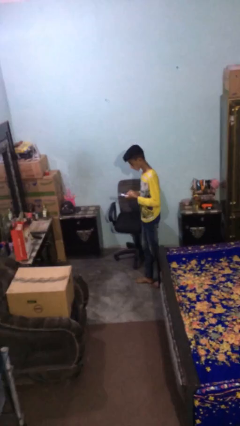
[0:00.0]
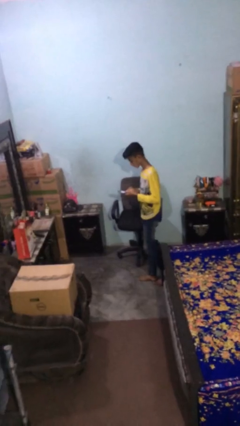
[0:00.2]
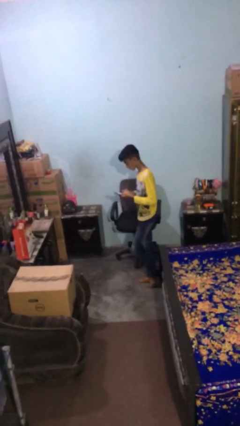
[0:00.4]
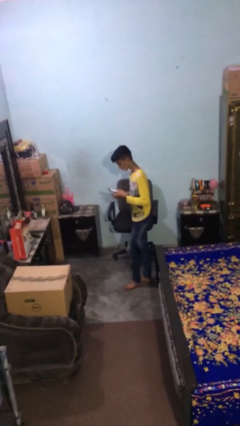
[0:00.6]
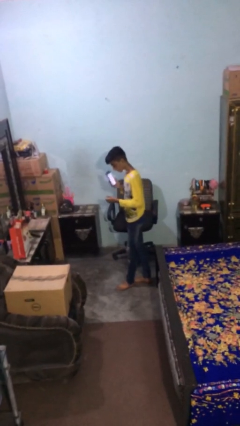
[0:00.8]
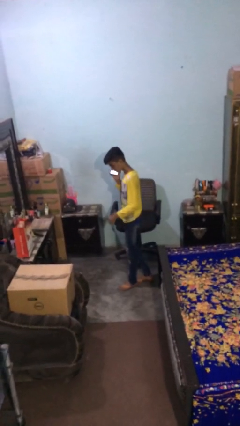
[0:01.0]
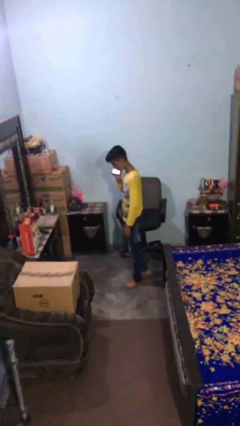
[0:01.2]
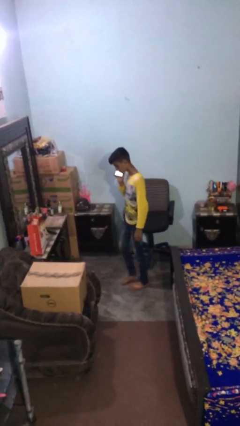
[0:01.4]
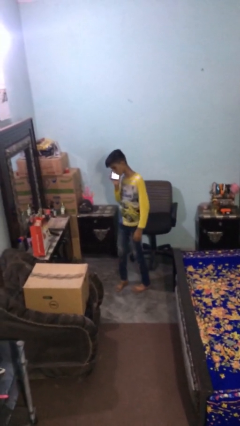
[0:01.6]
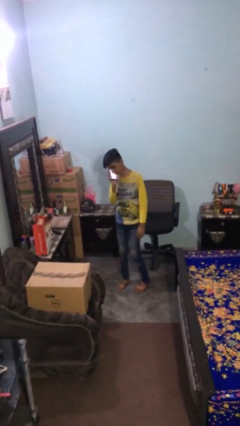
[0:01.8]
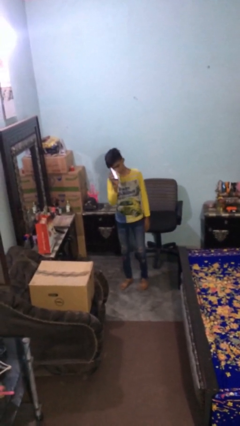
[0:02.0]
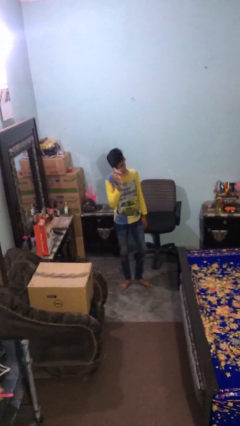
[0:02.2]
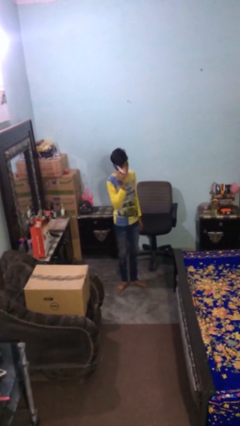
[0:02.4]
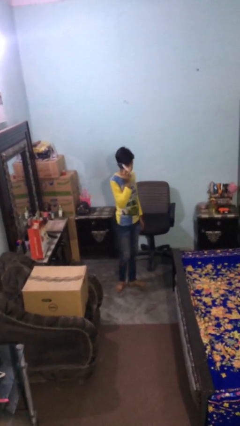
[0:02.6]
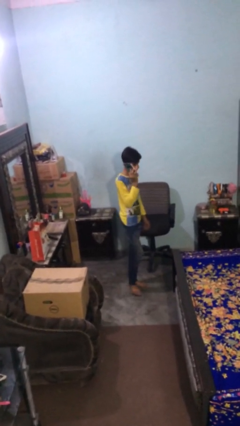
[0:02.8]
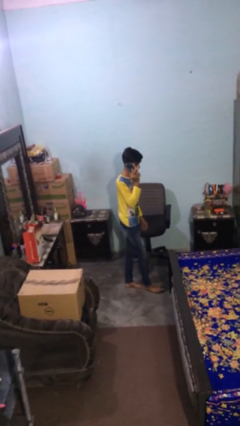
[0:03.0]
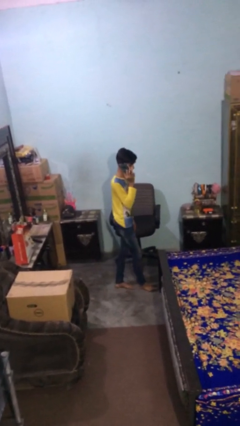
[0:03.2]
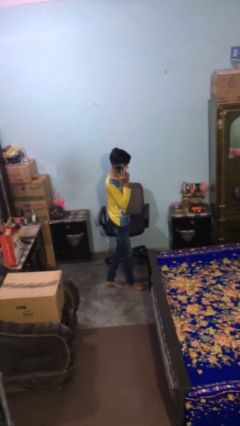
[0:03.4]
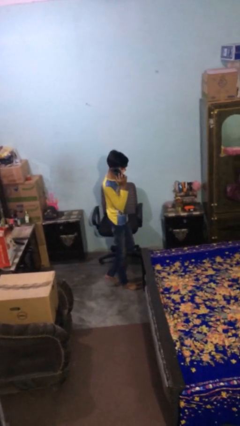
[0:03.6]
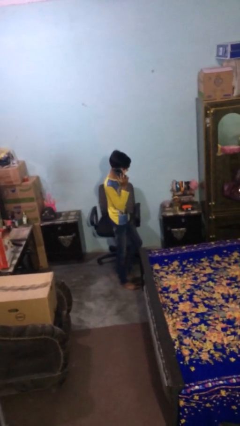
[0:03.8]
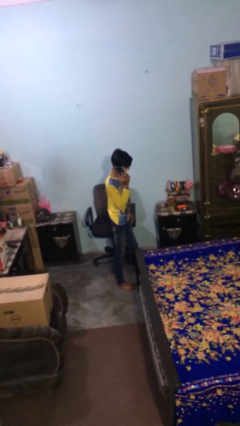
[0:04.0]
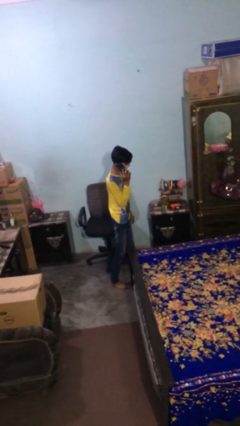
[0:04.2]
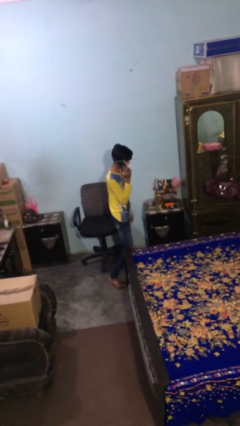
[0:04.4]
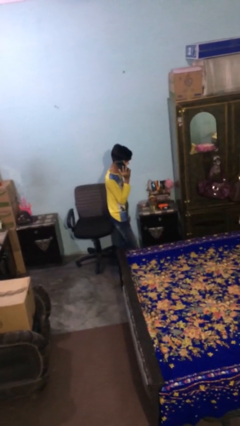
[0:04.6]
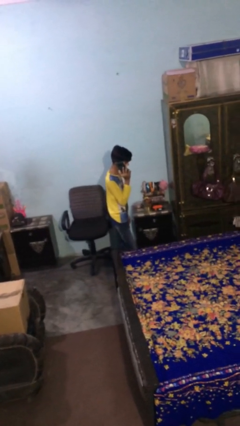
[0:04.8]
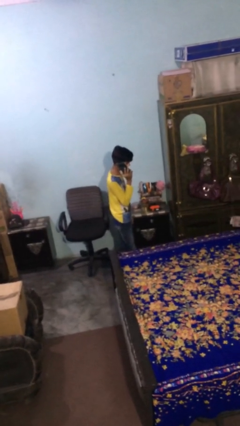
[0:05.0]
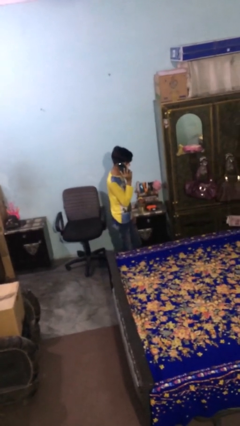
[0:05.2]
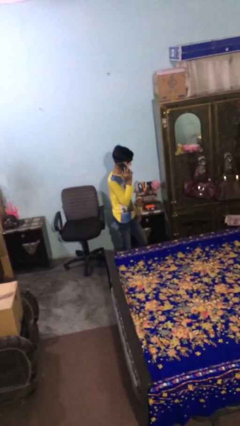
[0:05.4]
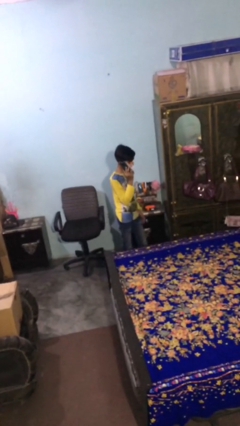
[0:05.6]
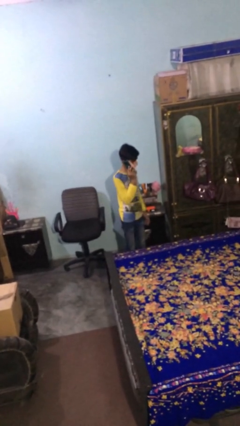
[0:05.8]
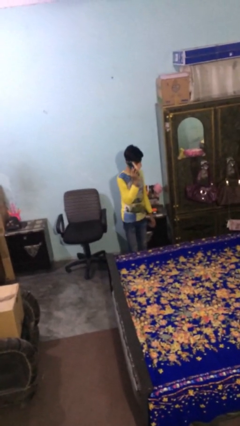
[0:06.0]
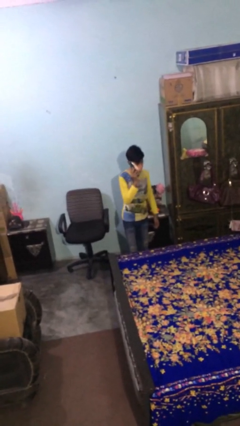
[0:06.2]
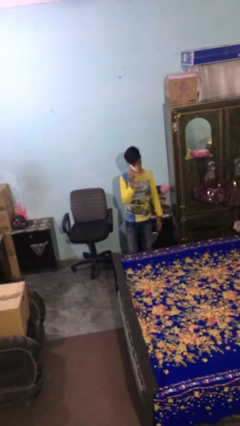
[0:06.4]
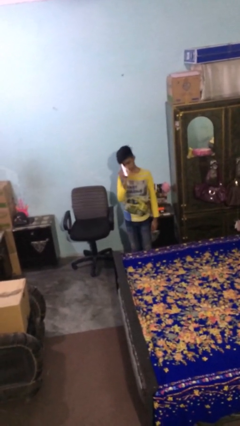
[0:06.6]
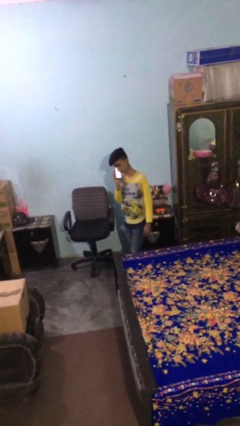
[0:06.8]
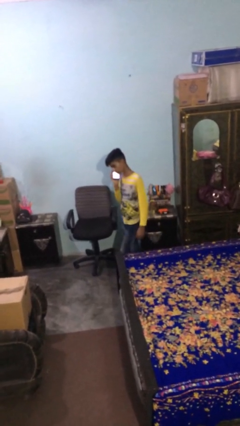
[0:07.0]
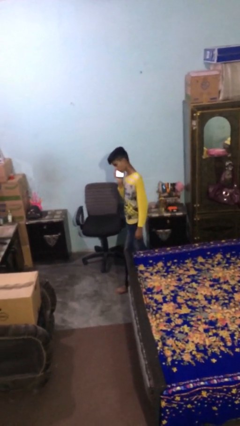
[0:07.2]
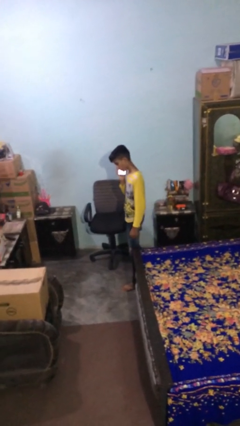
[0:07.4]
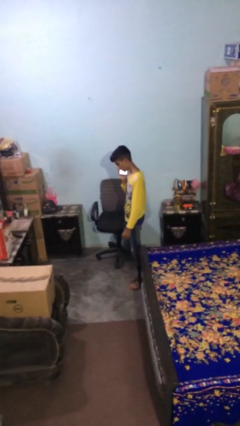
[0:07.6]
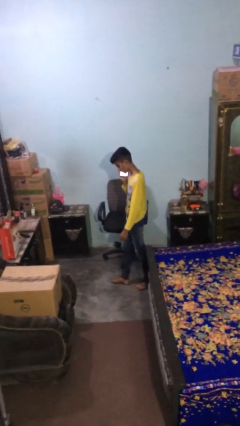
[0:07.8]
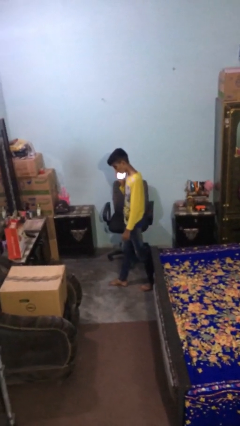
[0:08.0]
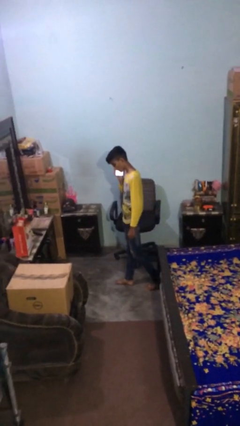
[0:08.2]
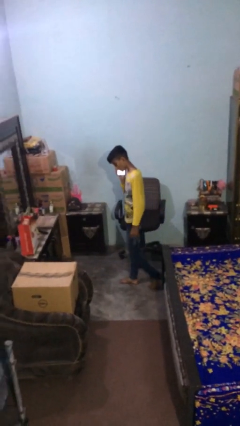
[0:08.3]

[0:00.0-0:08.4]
person talks on phone

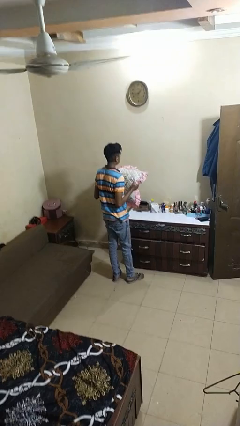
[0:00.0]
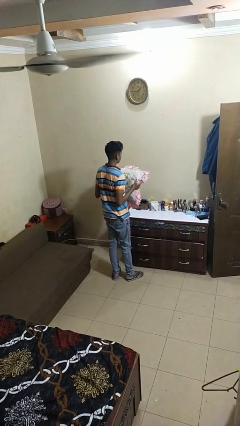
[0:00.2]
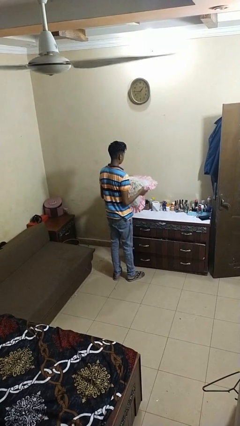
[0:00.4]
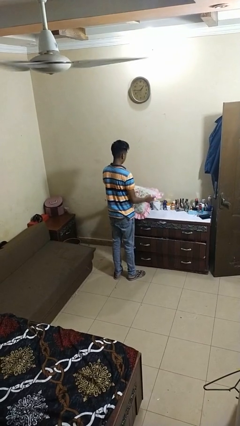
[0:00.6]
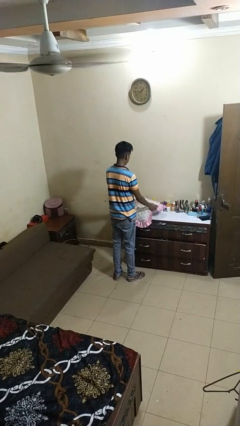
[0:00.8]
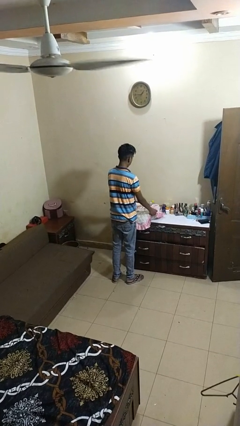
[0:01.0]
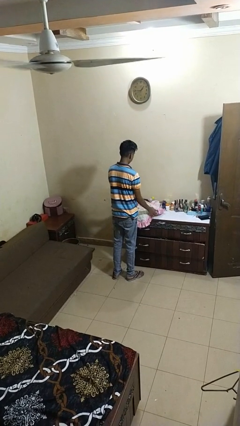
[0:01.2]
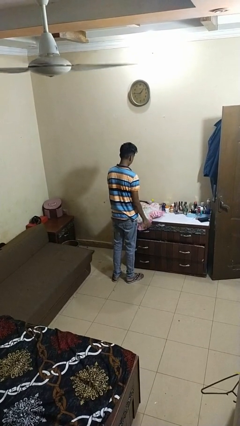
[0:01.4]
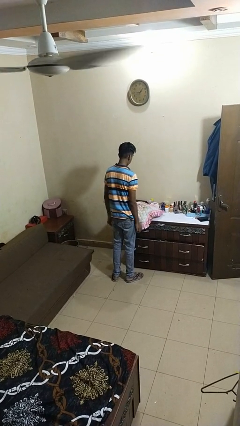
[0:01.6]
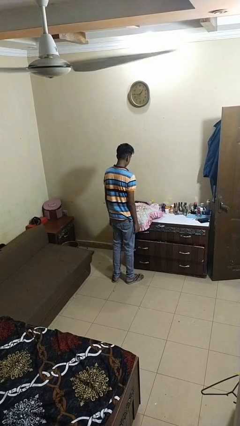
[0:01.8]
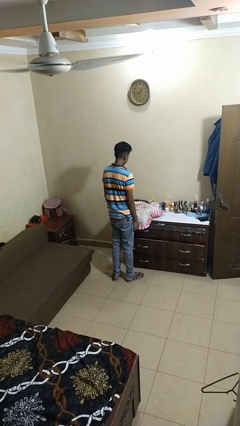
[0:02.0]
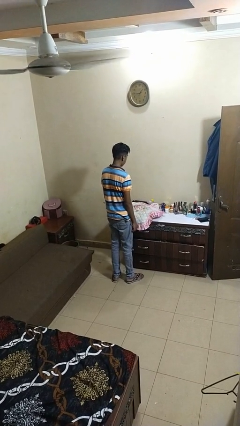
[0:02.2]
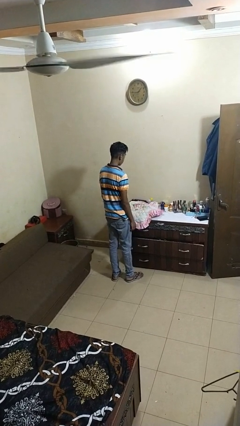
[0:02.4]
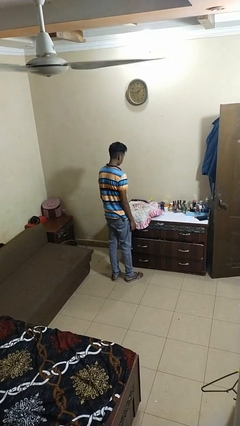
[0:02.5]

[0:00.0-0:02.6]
person puts down object on countertop

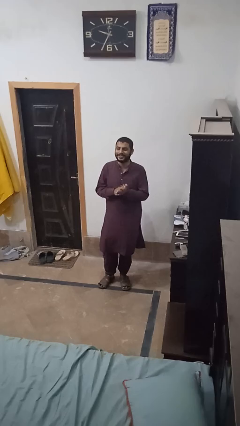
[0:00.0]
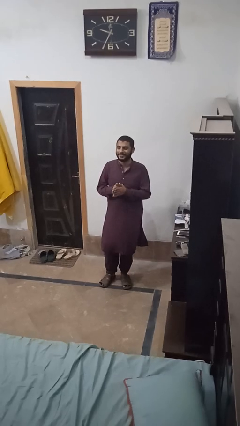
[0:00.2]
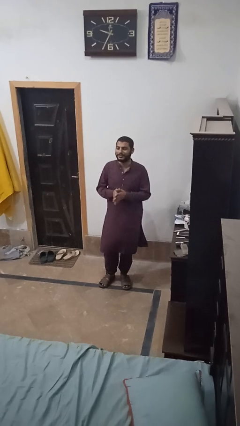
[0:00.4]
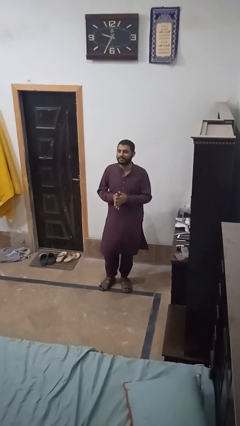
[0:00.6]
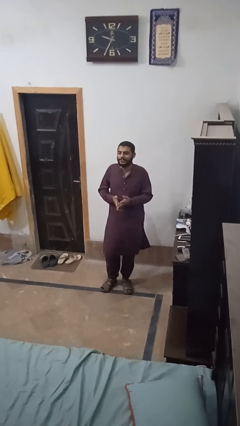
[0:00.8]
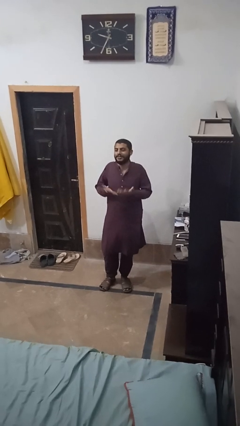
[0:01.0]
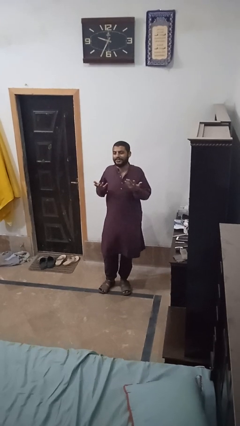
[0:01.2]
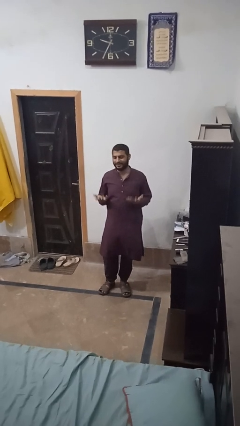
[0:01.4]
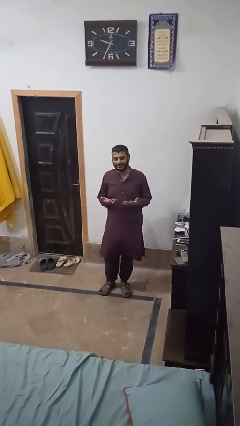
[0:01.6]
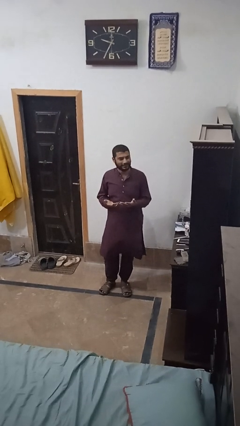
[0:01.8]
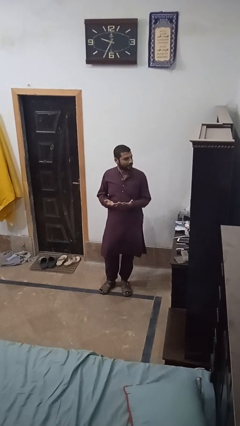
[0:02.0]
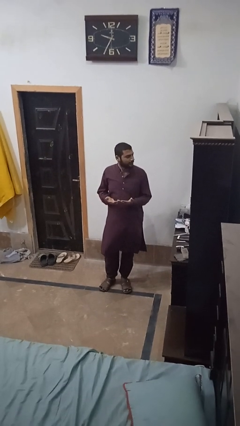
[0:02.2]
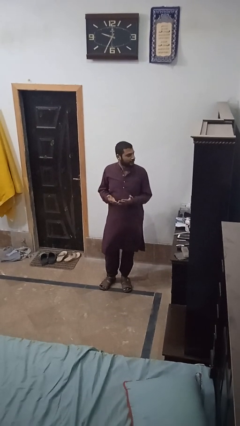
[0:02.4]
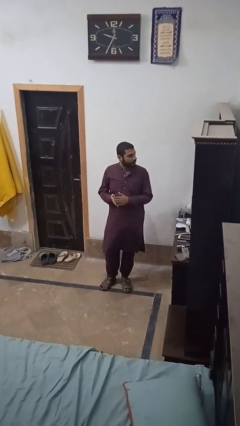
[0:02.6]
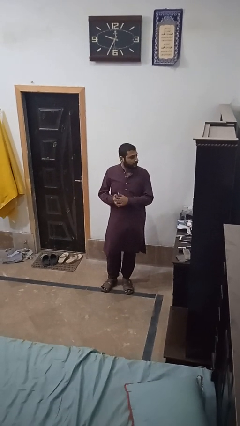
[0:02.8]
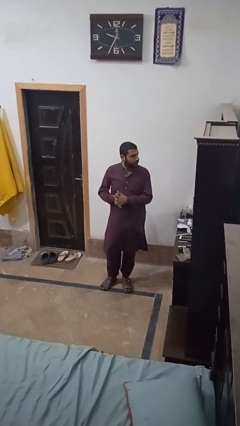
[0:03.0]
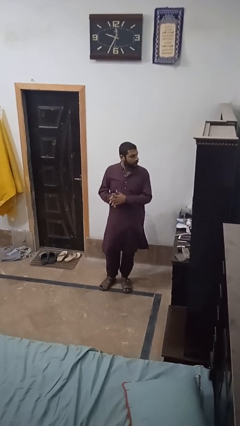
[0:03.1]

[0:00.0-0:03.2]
person shrugs

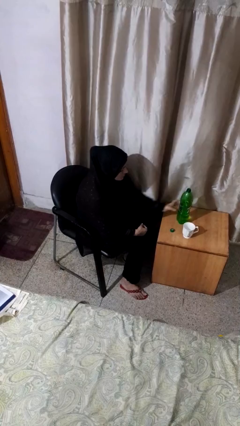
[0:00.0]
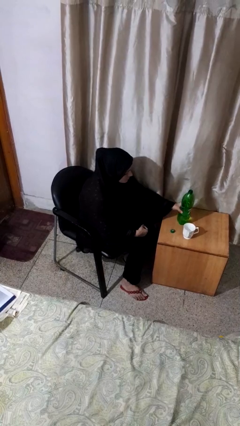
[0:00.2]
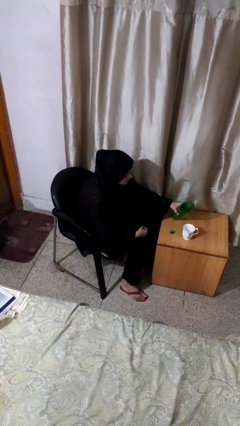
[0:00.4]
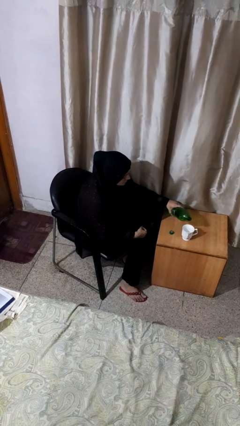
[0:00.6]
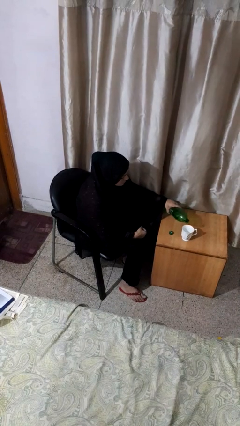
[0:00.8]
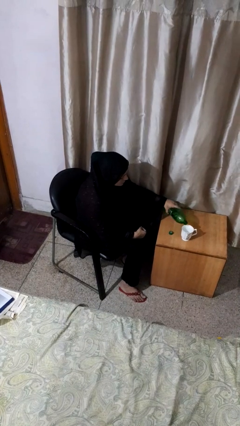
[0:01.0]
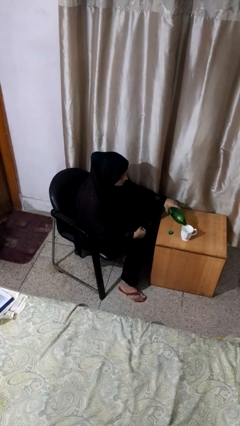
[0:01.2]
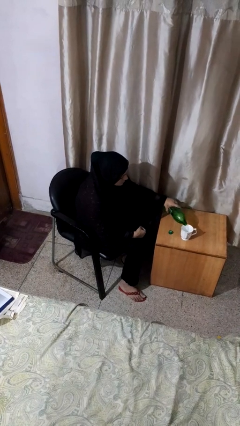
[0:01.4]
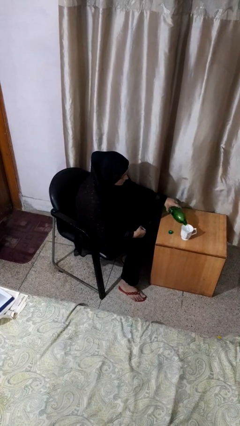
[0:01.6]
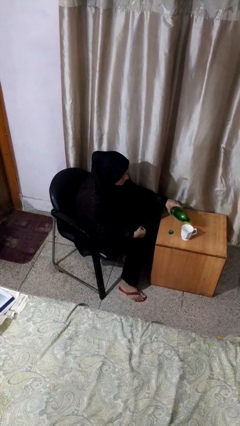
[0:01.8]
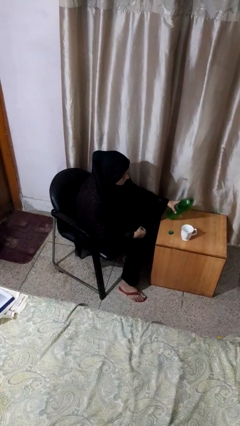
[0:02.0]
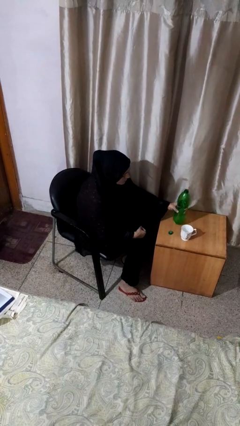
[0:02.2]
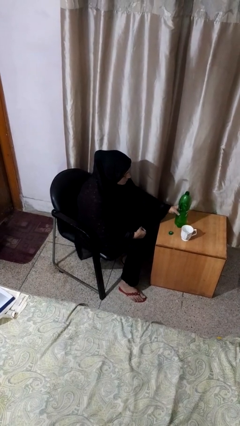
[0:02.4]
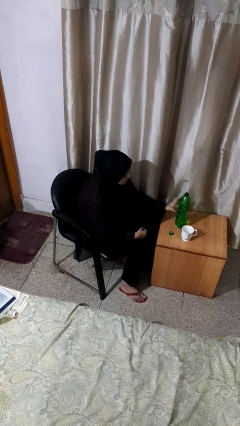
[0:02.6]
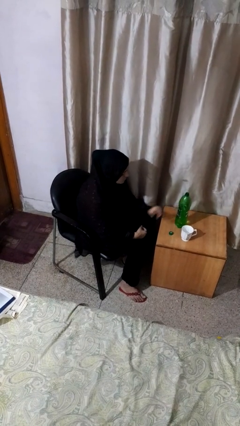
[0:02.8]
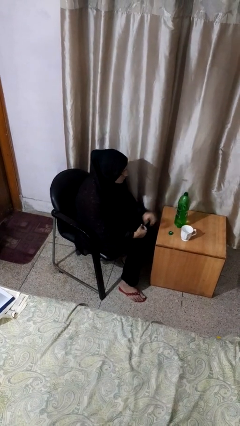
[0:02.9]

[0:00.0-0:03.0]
person pours liquid into cup
